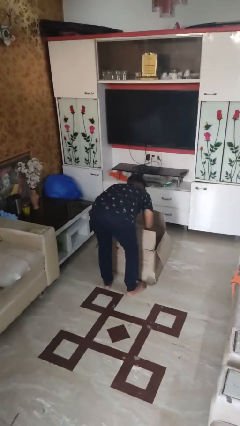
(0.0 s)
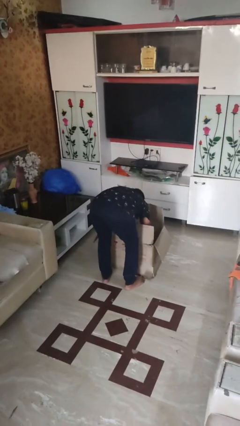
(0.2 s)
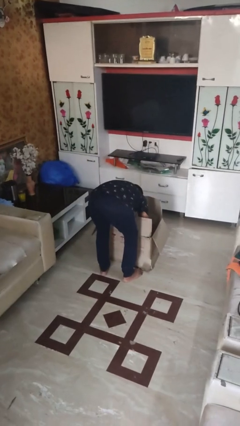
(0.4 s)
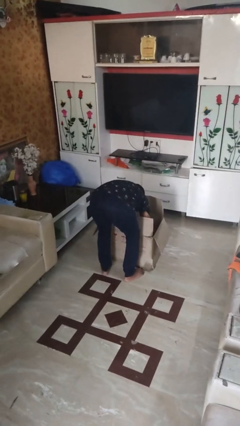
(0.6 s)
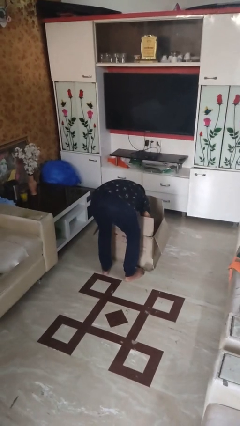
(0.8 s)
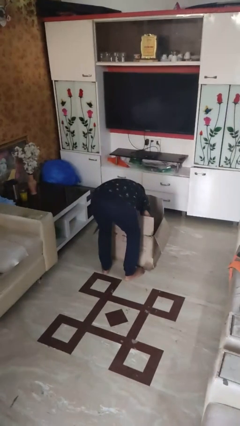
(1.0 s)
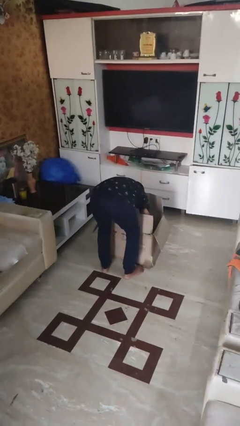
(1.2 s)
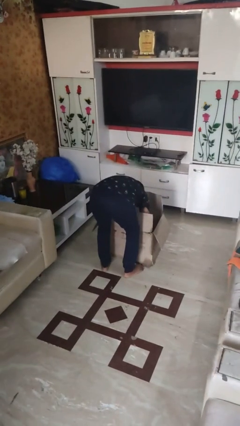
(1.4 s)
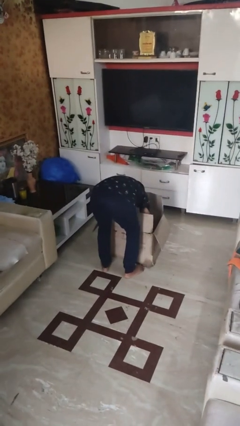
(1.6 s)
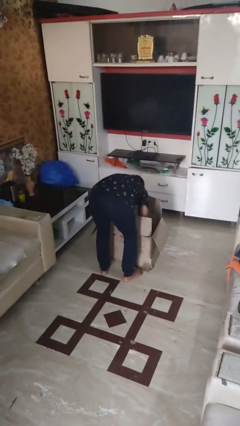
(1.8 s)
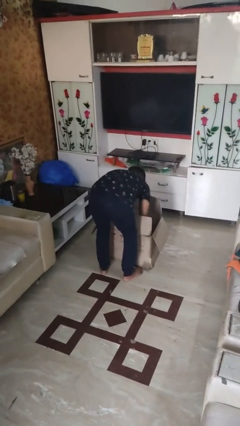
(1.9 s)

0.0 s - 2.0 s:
person searches in box

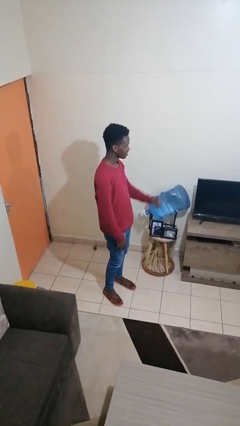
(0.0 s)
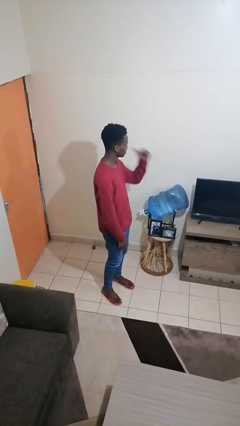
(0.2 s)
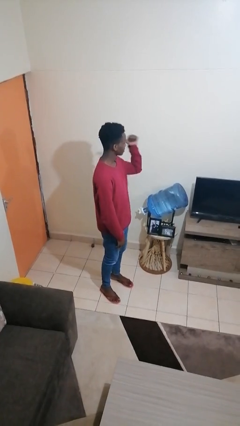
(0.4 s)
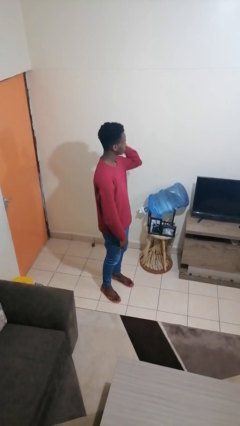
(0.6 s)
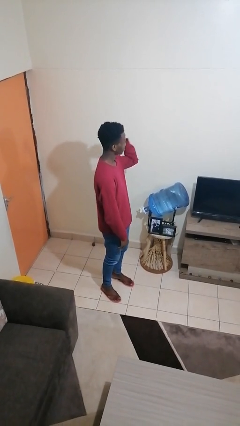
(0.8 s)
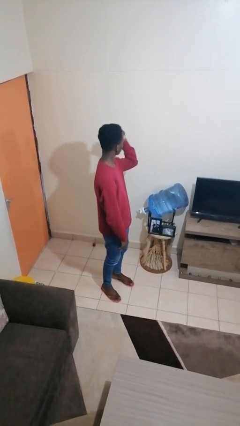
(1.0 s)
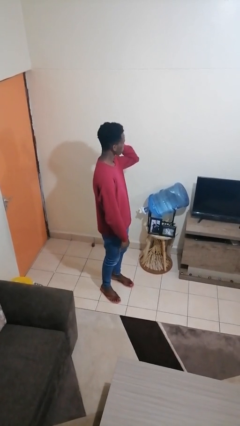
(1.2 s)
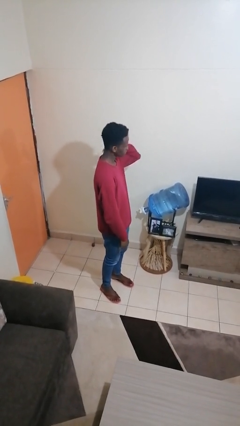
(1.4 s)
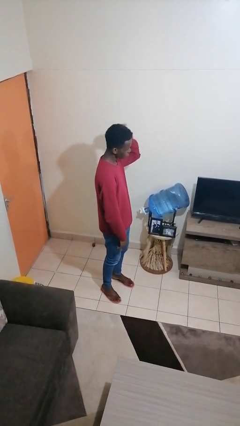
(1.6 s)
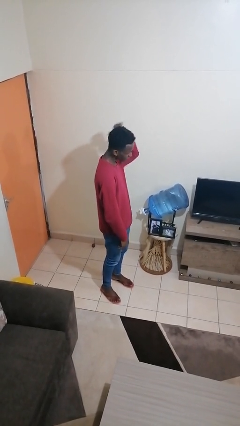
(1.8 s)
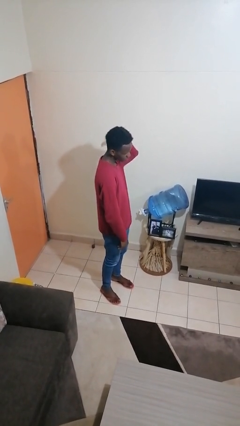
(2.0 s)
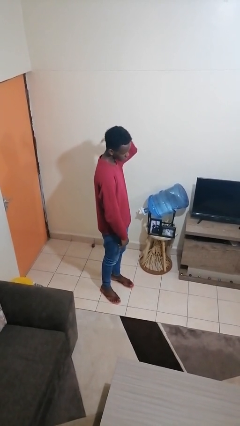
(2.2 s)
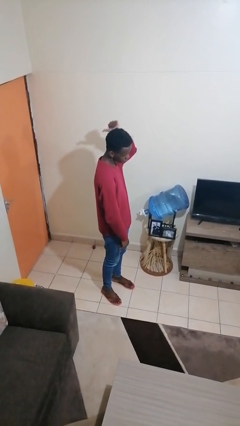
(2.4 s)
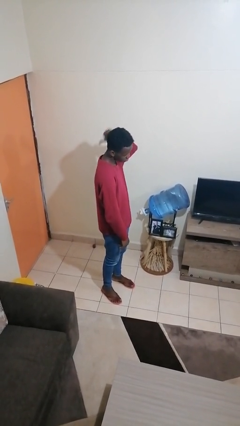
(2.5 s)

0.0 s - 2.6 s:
person gestures behind me

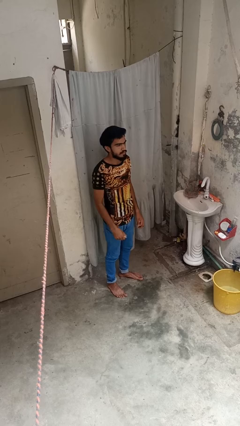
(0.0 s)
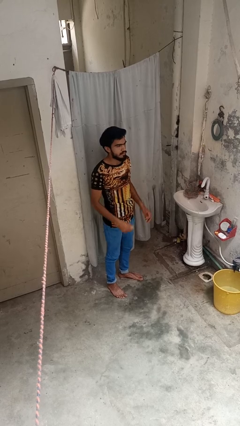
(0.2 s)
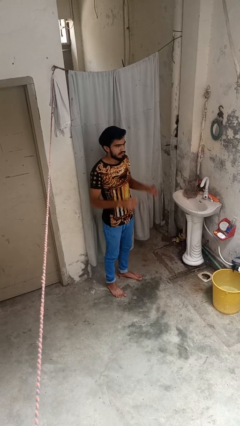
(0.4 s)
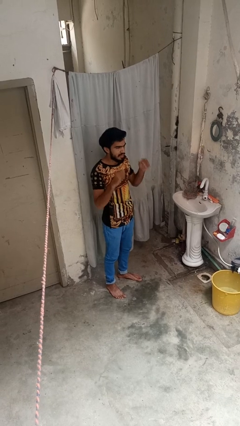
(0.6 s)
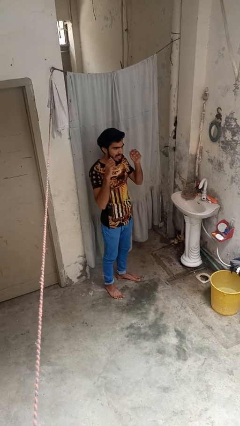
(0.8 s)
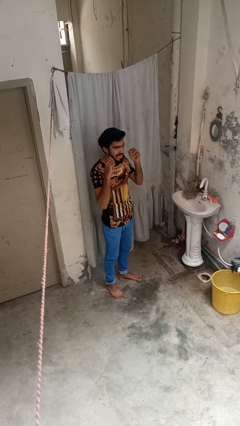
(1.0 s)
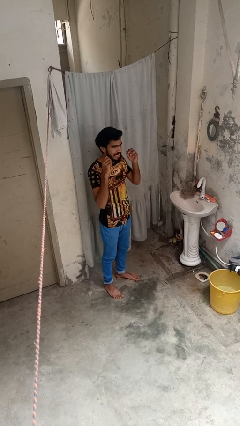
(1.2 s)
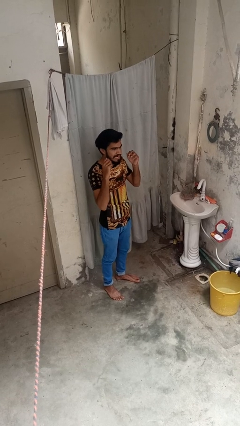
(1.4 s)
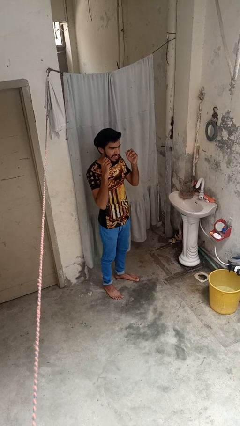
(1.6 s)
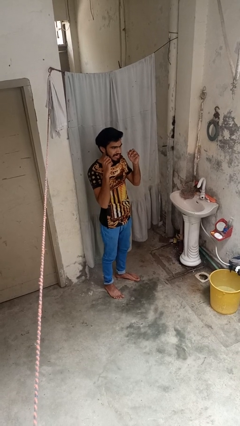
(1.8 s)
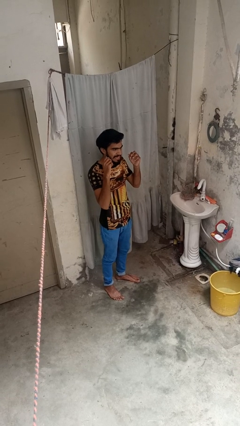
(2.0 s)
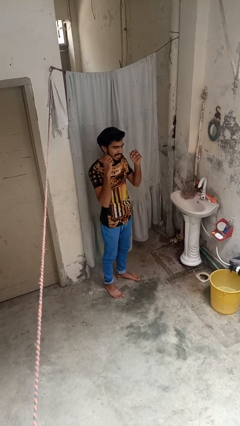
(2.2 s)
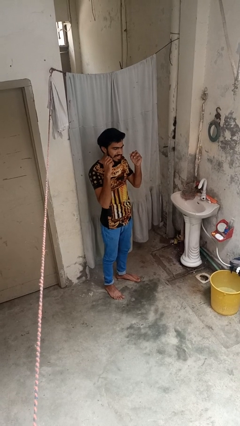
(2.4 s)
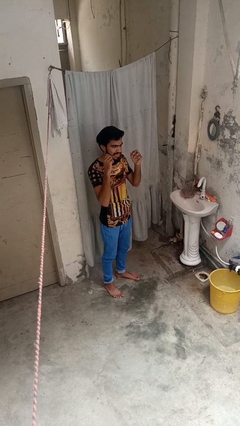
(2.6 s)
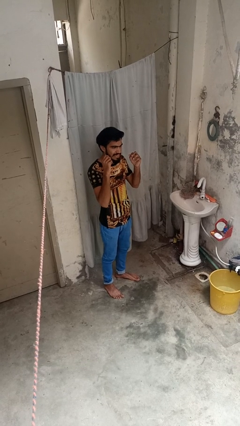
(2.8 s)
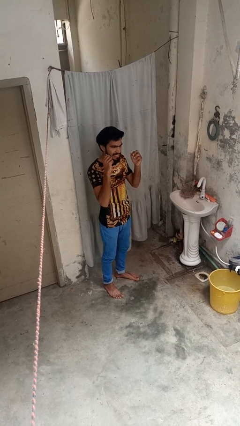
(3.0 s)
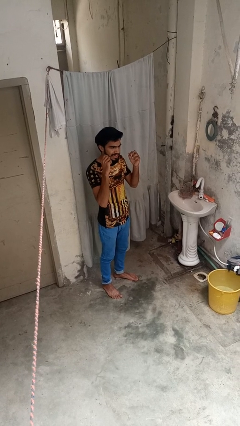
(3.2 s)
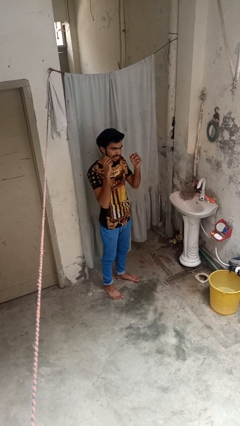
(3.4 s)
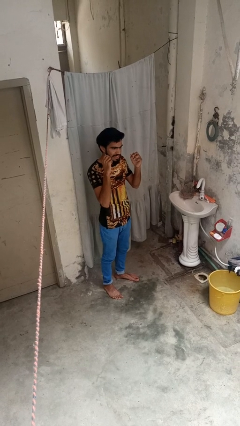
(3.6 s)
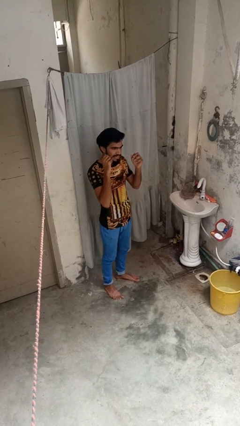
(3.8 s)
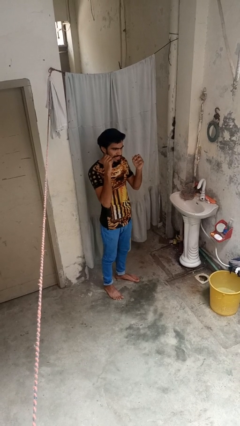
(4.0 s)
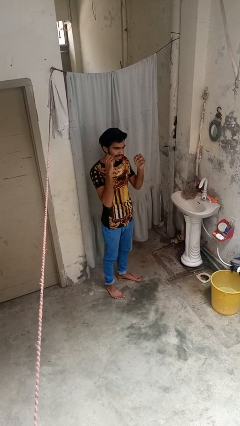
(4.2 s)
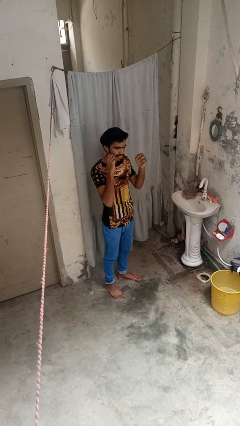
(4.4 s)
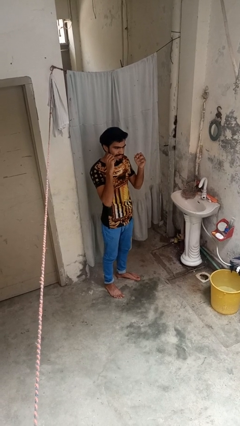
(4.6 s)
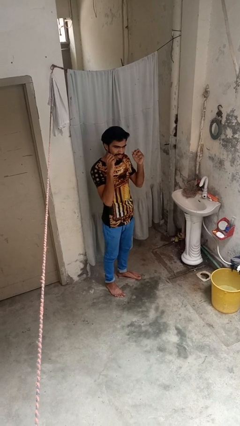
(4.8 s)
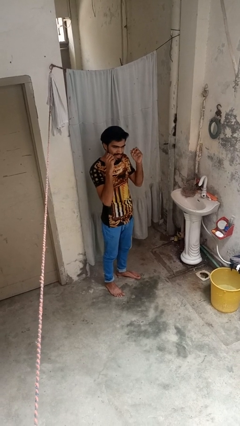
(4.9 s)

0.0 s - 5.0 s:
person flosses

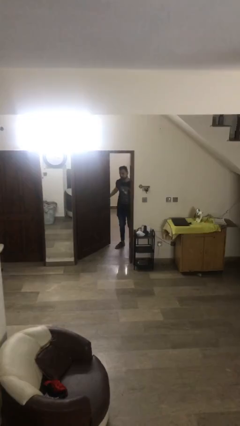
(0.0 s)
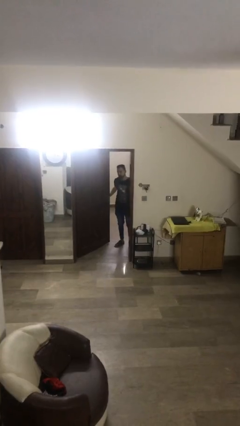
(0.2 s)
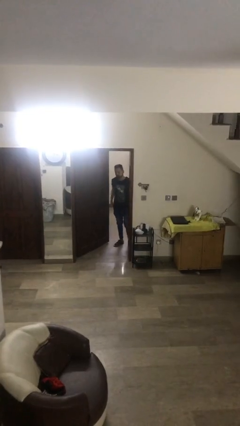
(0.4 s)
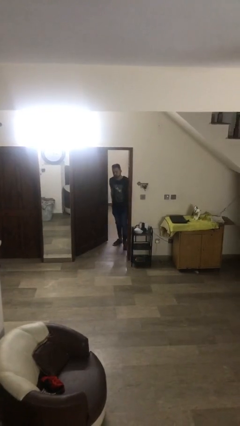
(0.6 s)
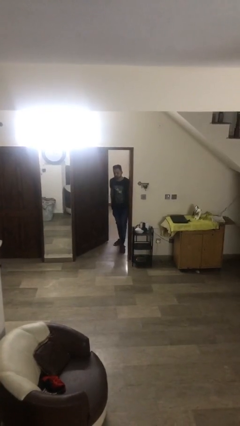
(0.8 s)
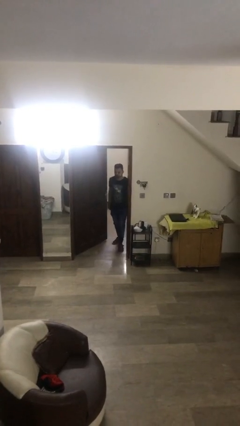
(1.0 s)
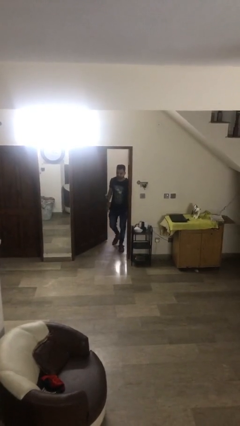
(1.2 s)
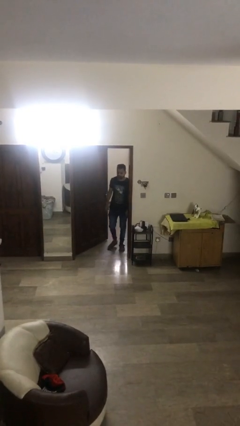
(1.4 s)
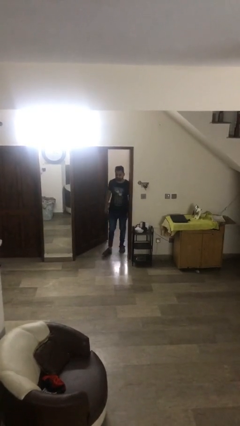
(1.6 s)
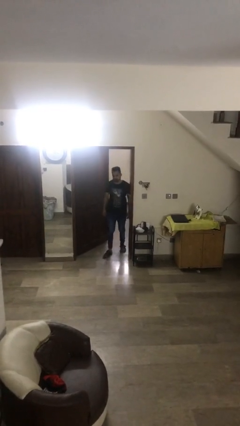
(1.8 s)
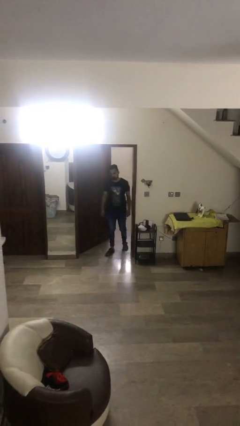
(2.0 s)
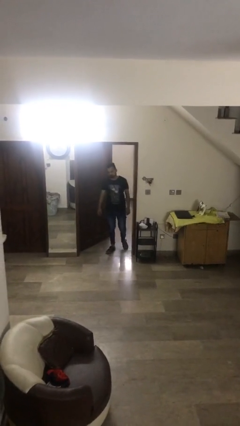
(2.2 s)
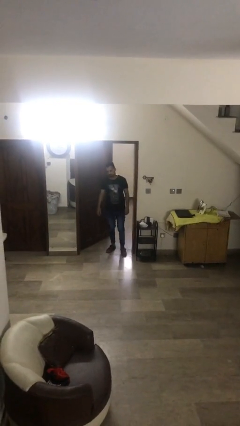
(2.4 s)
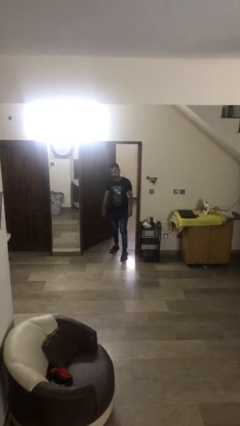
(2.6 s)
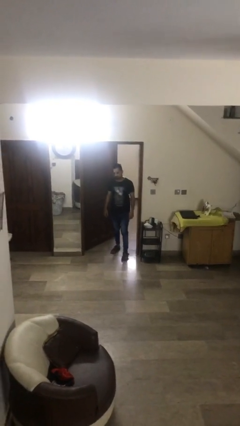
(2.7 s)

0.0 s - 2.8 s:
person enters scene through structure

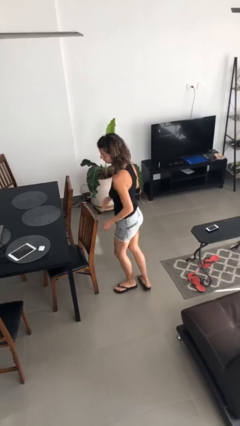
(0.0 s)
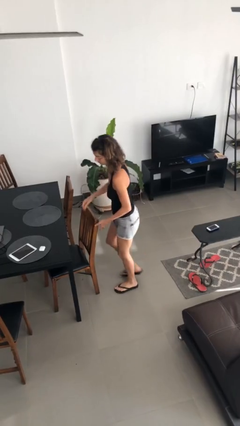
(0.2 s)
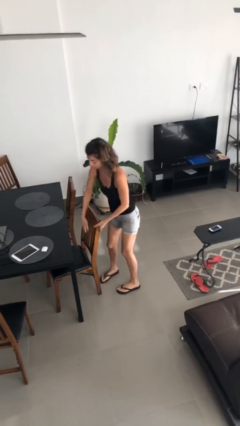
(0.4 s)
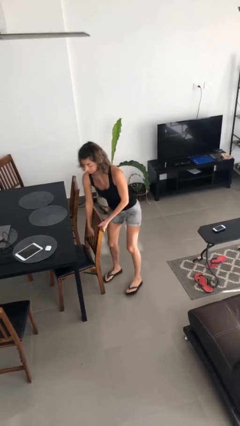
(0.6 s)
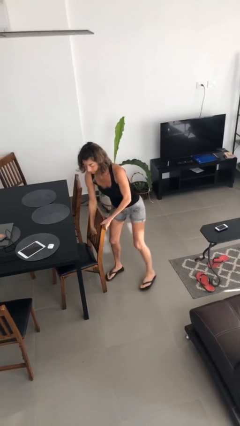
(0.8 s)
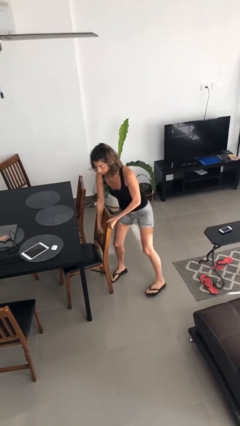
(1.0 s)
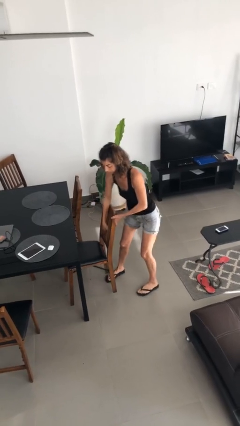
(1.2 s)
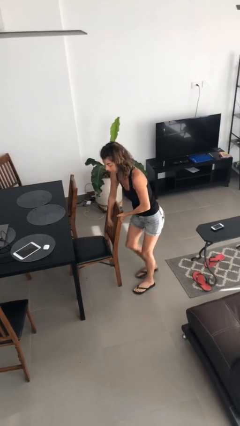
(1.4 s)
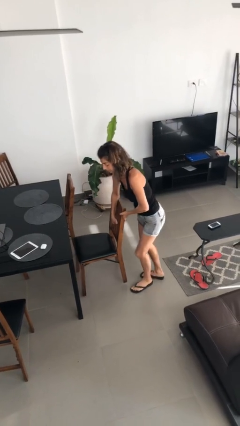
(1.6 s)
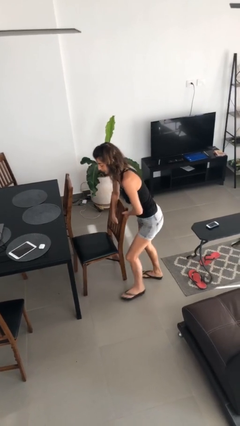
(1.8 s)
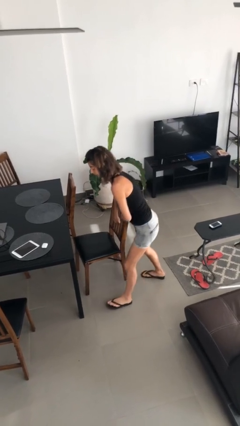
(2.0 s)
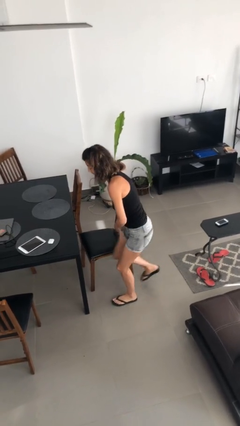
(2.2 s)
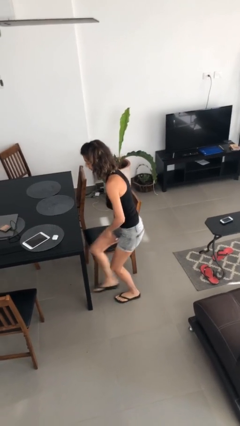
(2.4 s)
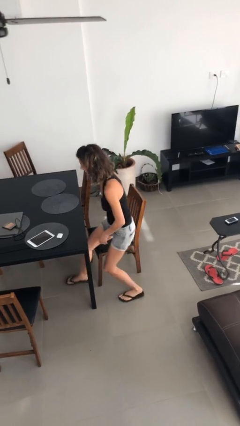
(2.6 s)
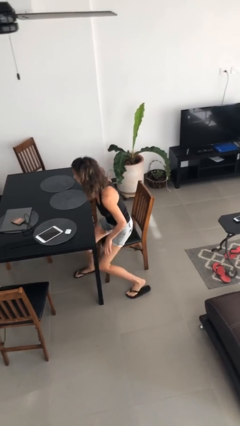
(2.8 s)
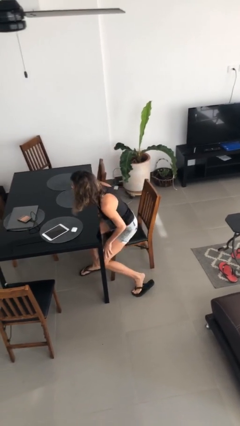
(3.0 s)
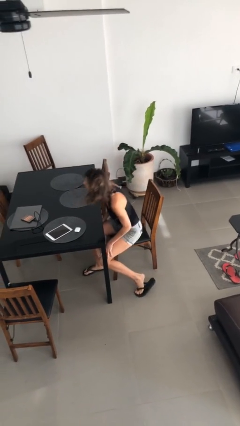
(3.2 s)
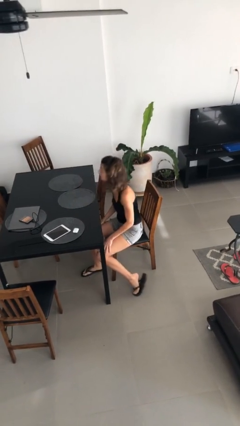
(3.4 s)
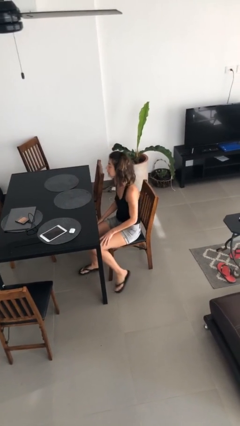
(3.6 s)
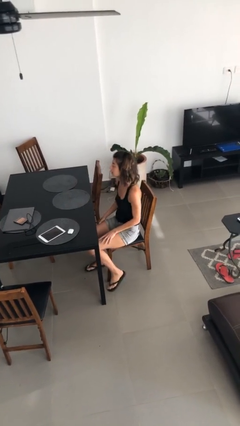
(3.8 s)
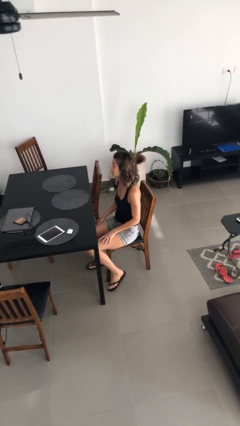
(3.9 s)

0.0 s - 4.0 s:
person sits down

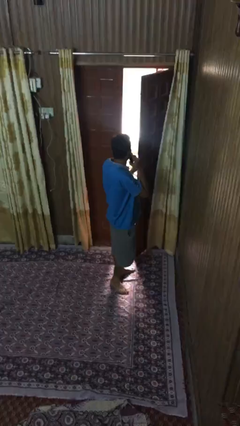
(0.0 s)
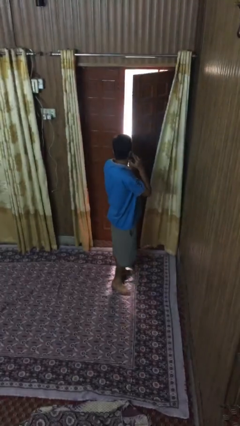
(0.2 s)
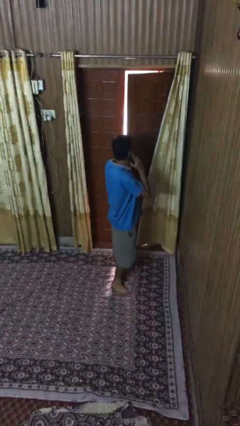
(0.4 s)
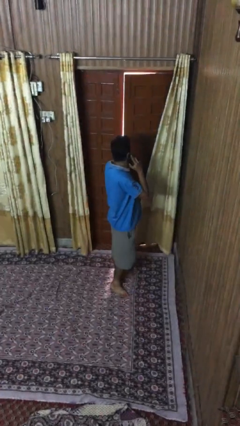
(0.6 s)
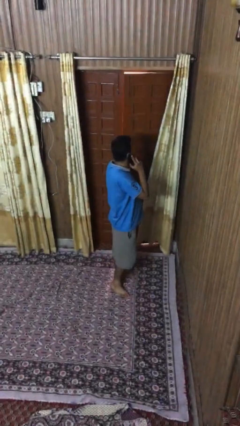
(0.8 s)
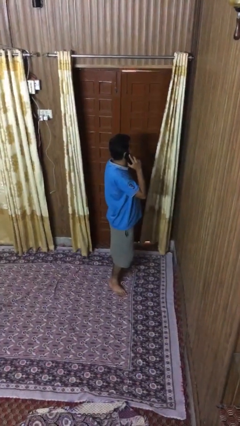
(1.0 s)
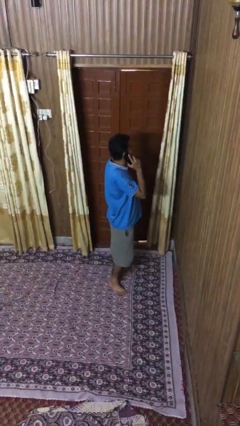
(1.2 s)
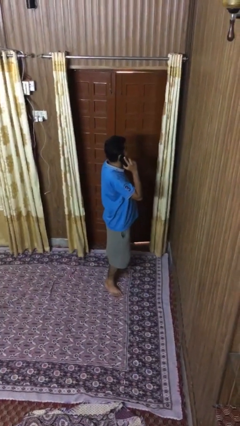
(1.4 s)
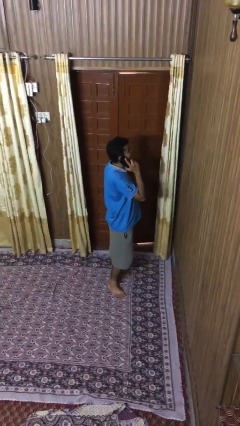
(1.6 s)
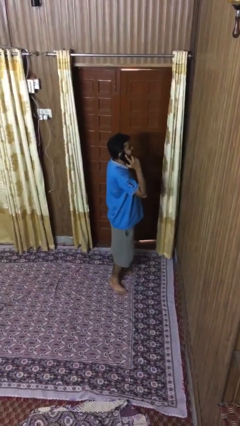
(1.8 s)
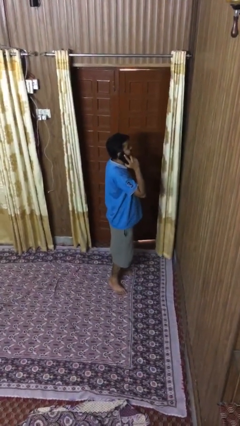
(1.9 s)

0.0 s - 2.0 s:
person closes facility door
